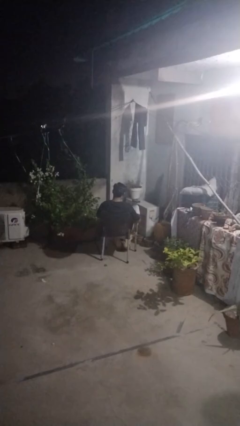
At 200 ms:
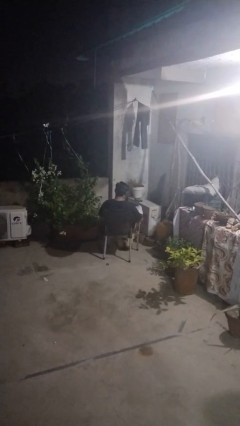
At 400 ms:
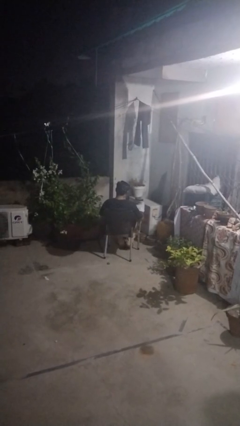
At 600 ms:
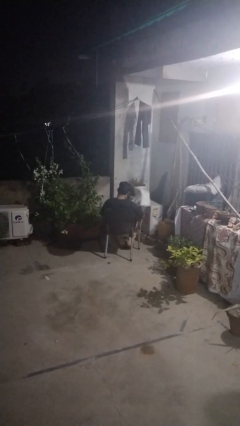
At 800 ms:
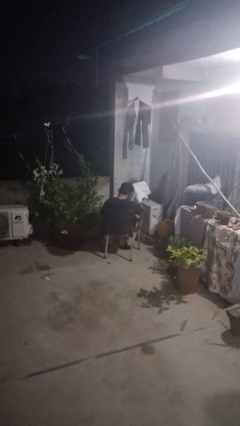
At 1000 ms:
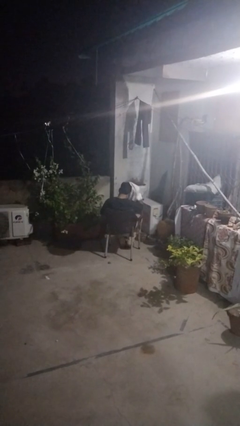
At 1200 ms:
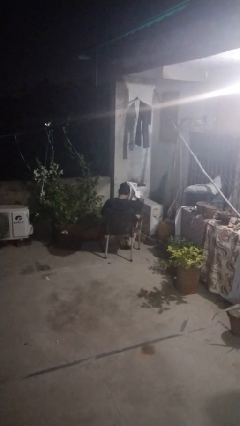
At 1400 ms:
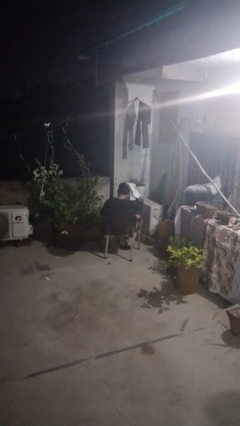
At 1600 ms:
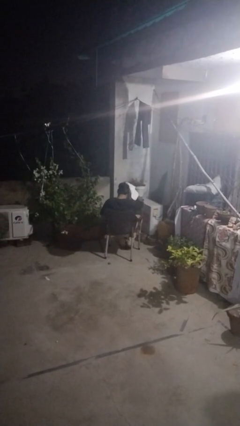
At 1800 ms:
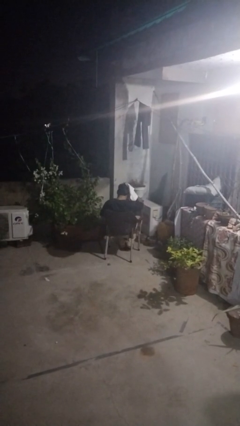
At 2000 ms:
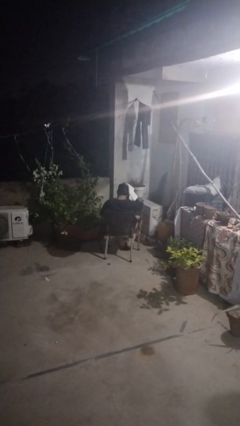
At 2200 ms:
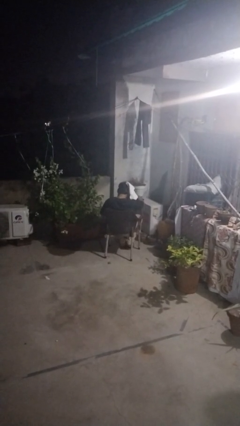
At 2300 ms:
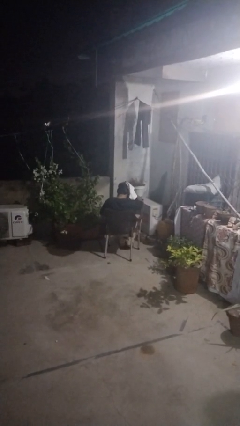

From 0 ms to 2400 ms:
person dries hair with towel

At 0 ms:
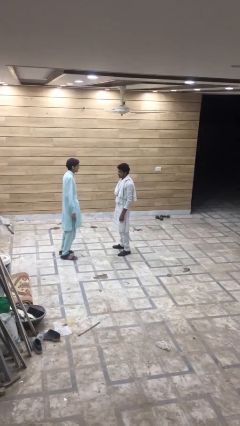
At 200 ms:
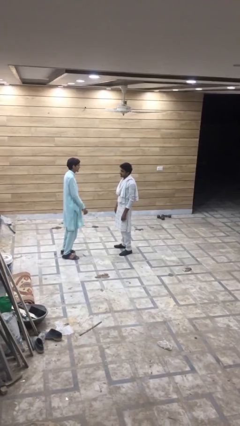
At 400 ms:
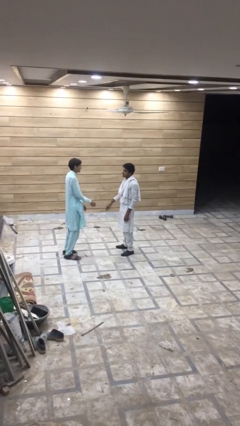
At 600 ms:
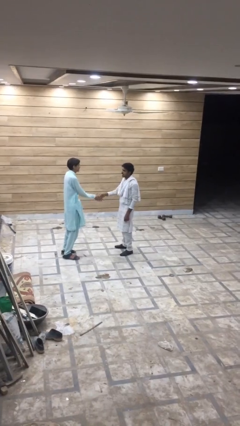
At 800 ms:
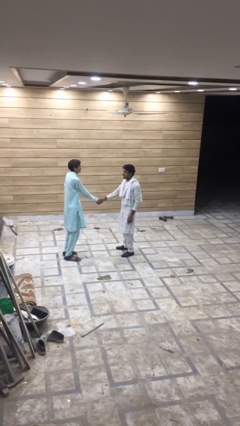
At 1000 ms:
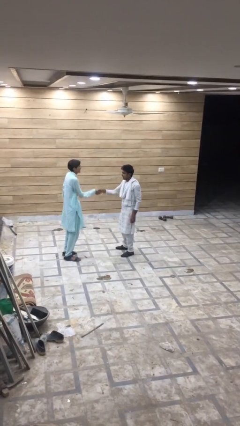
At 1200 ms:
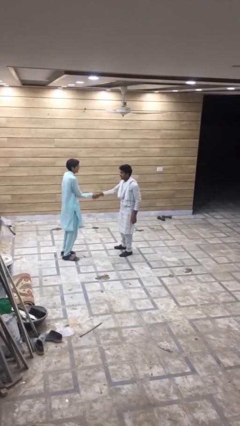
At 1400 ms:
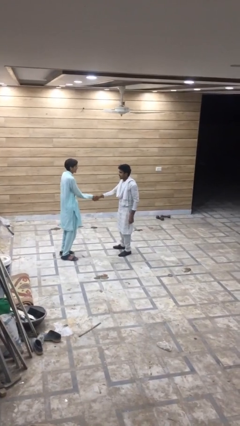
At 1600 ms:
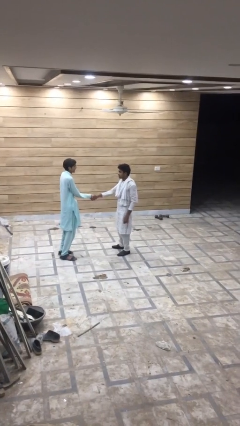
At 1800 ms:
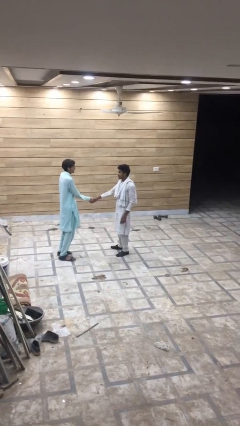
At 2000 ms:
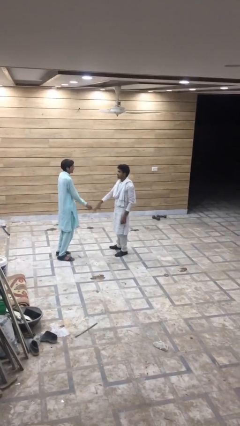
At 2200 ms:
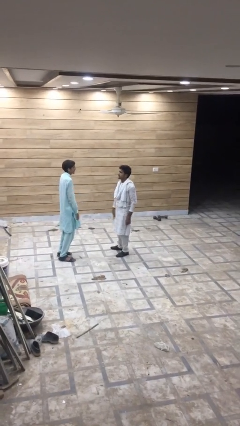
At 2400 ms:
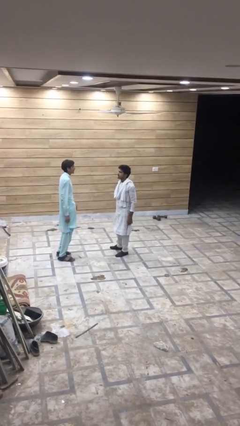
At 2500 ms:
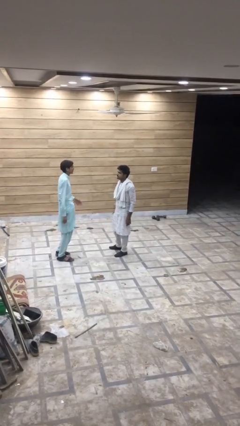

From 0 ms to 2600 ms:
person shakes hand

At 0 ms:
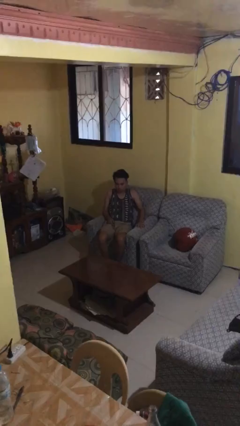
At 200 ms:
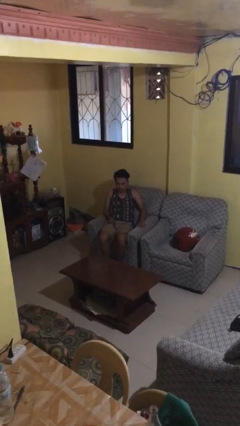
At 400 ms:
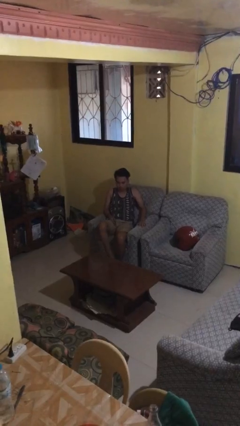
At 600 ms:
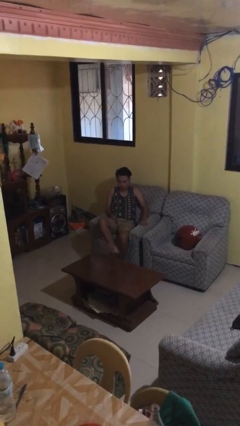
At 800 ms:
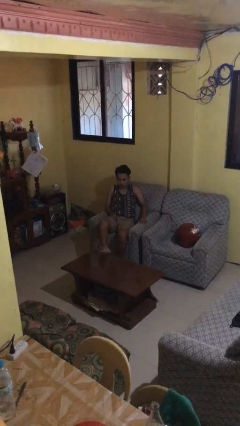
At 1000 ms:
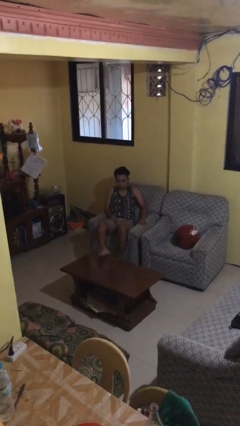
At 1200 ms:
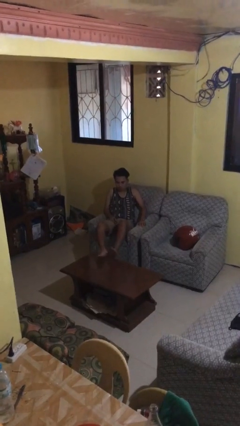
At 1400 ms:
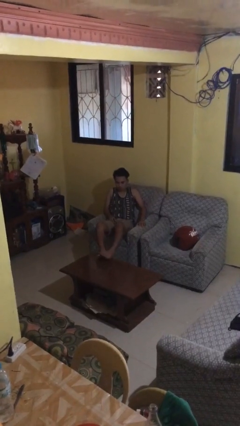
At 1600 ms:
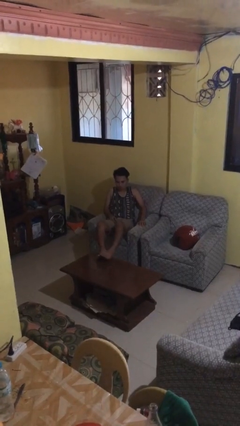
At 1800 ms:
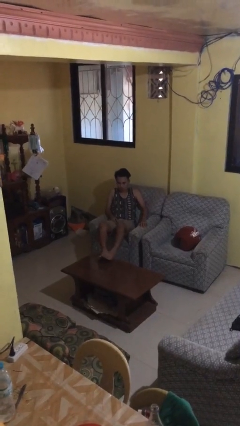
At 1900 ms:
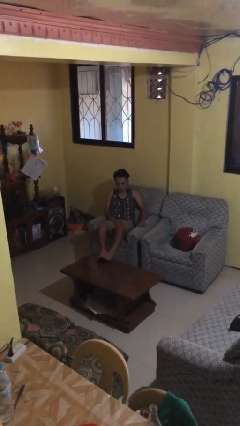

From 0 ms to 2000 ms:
person puts feet up

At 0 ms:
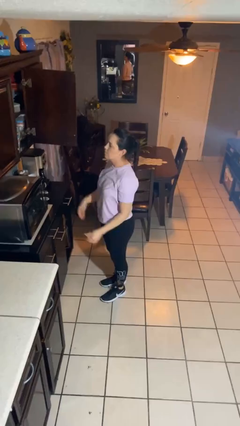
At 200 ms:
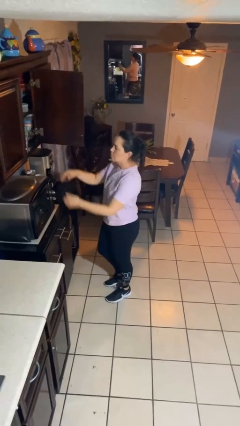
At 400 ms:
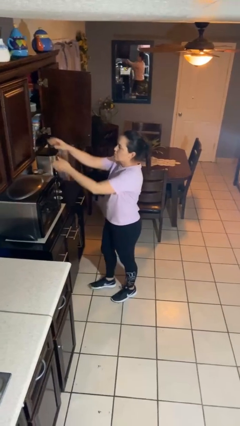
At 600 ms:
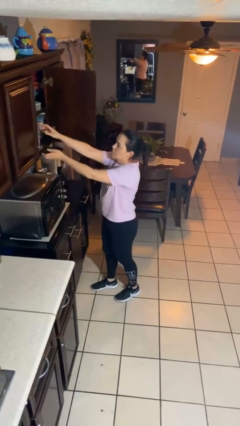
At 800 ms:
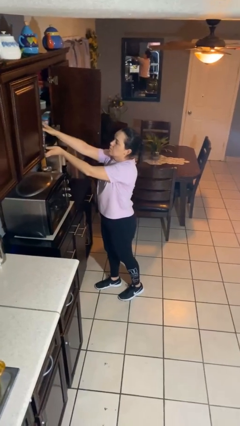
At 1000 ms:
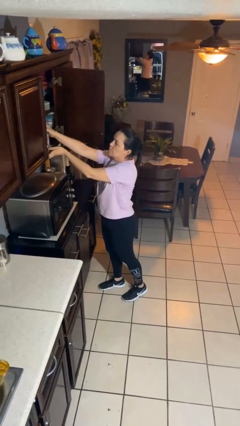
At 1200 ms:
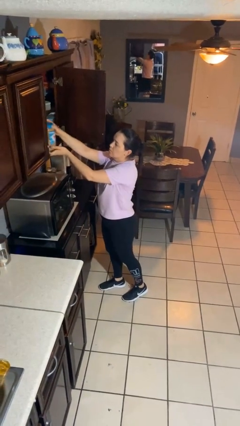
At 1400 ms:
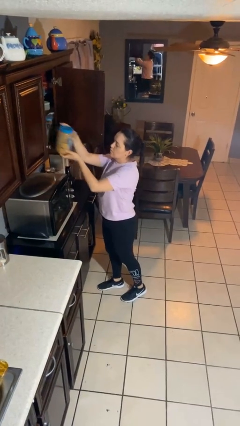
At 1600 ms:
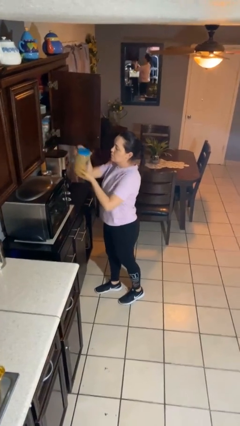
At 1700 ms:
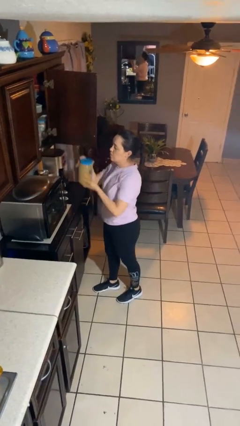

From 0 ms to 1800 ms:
person picks up object from cabinet

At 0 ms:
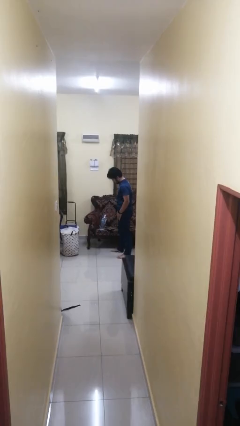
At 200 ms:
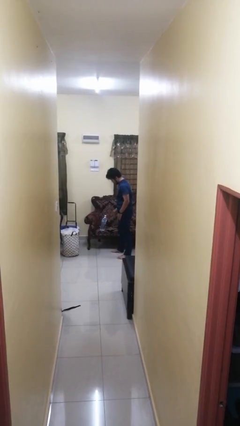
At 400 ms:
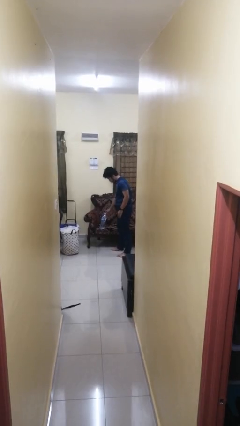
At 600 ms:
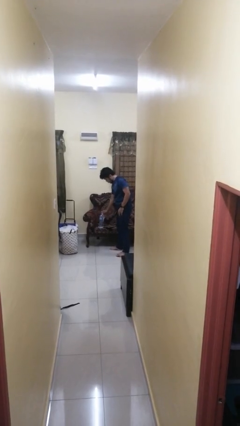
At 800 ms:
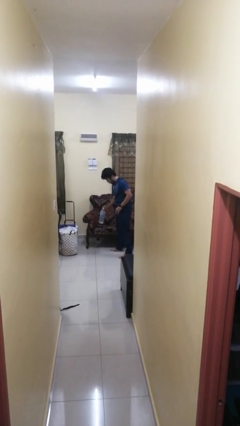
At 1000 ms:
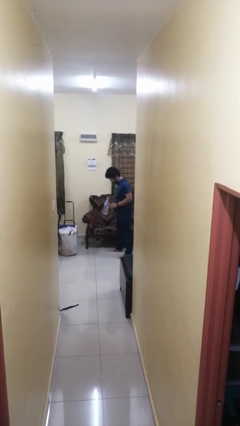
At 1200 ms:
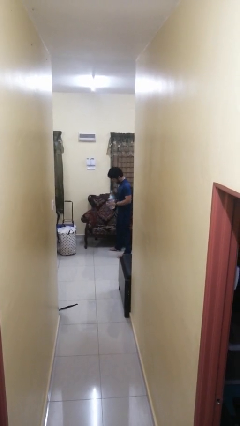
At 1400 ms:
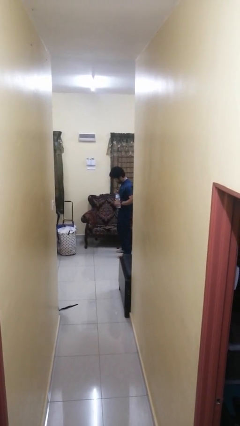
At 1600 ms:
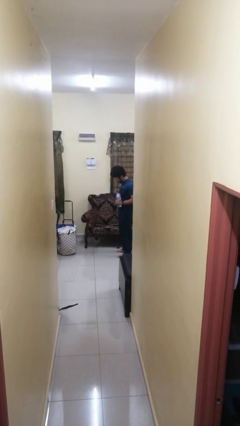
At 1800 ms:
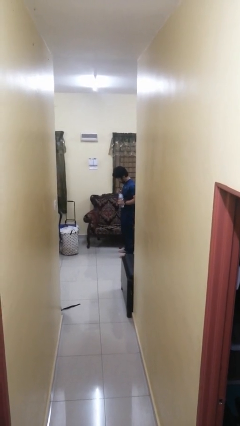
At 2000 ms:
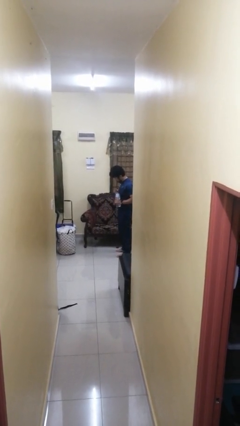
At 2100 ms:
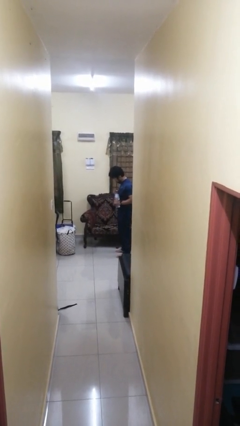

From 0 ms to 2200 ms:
person picks up object from couch

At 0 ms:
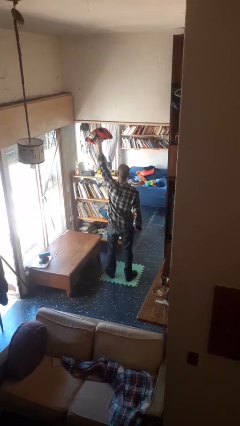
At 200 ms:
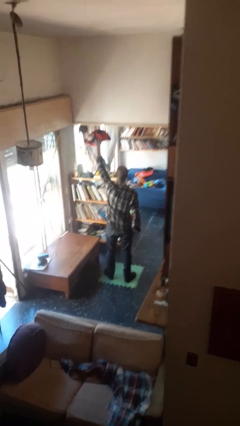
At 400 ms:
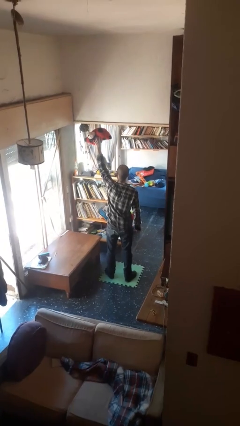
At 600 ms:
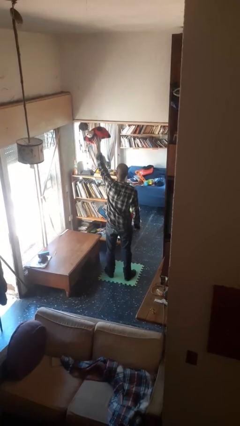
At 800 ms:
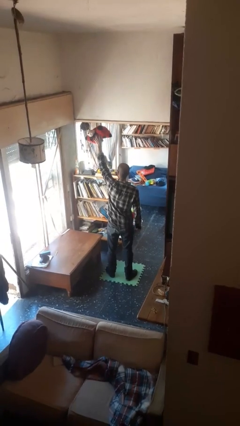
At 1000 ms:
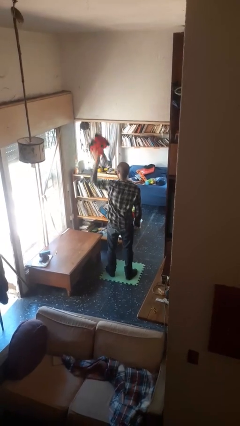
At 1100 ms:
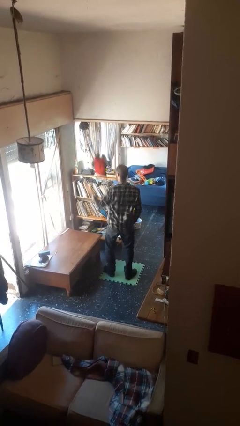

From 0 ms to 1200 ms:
person drops object

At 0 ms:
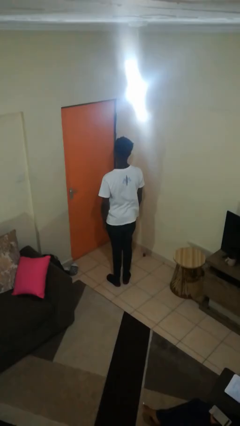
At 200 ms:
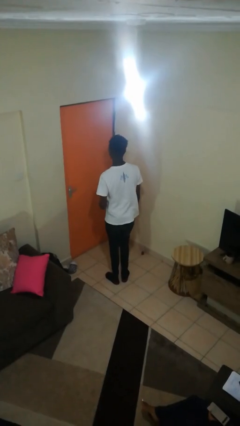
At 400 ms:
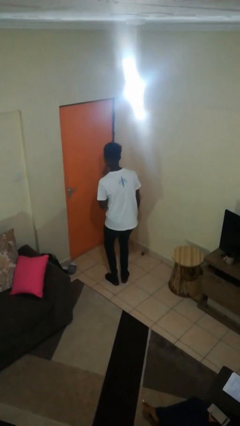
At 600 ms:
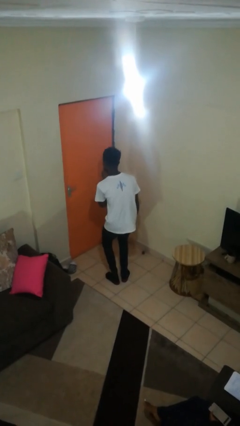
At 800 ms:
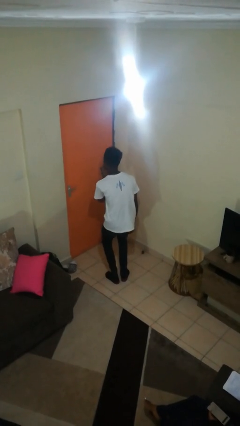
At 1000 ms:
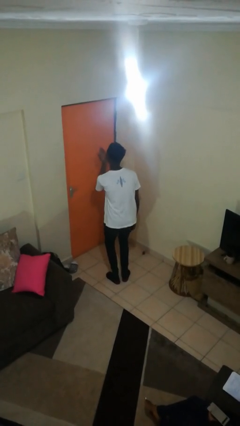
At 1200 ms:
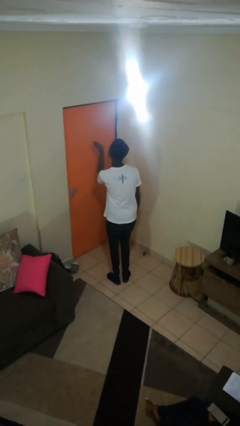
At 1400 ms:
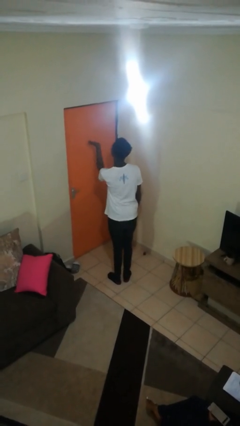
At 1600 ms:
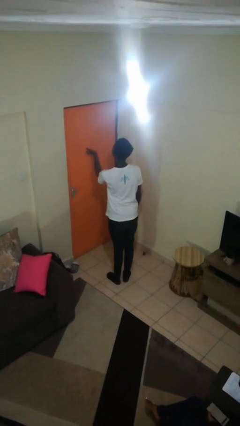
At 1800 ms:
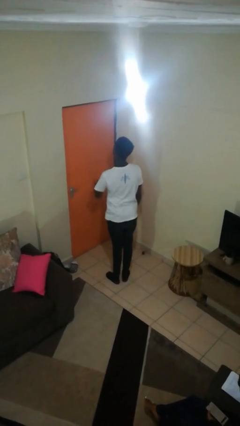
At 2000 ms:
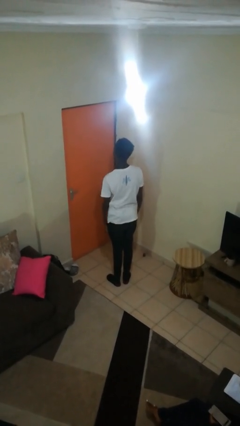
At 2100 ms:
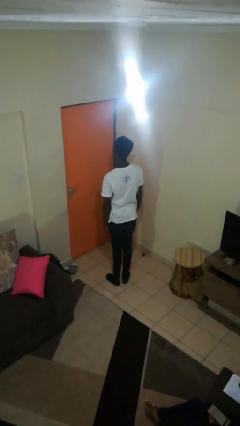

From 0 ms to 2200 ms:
person gestures blow kiss

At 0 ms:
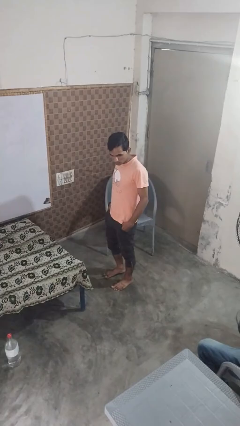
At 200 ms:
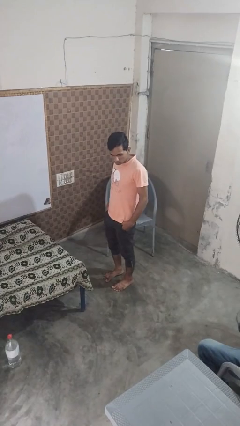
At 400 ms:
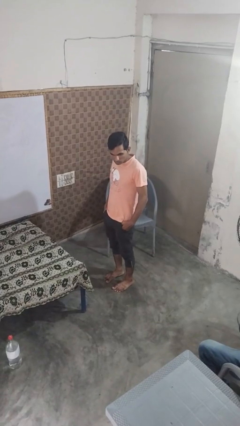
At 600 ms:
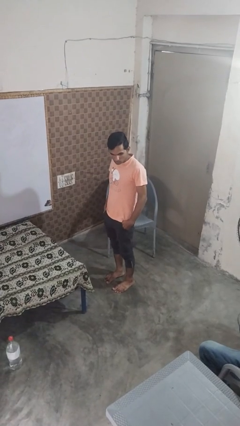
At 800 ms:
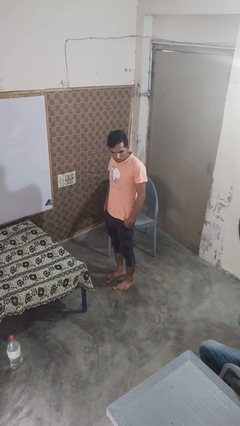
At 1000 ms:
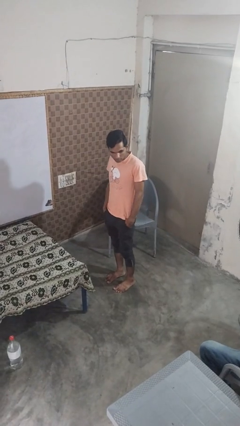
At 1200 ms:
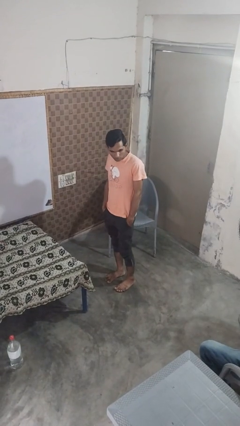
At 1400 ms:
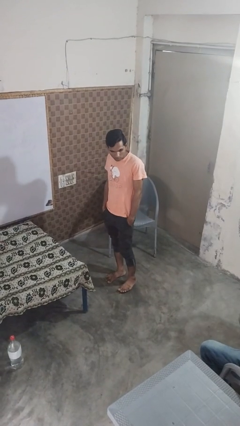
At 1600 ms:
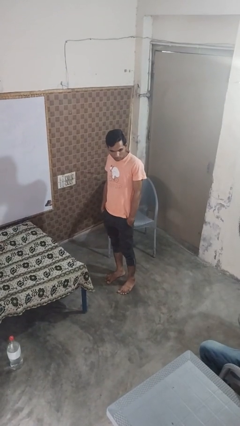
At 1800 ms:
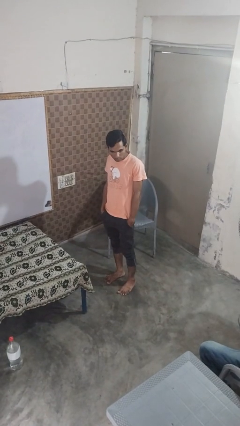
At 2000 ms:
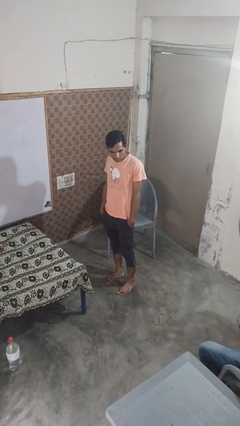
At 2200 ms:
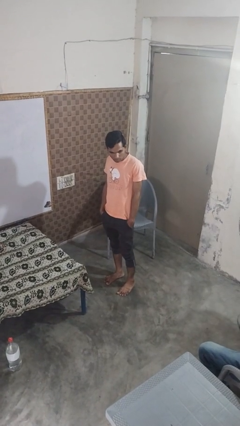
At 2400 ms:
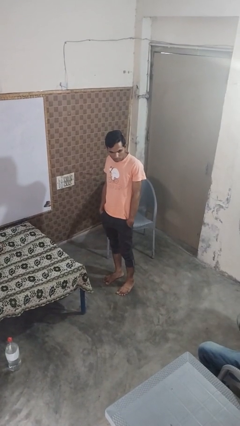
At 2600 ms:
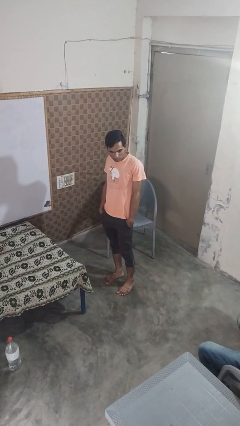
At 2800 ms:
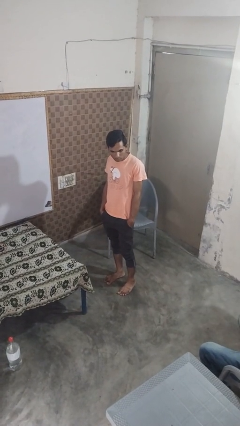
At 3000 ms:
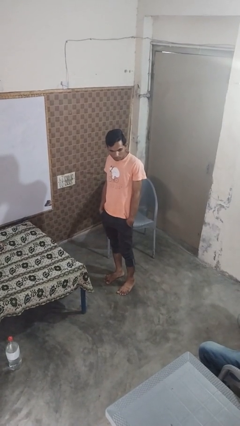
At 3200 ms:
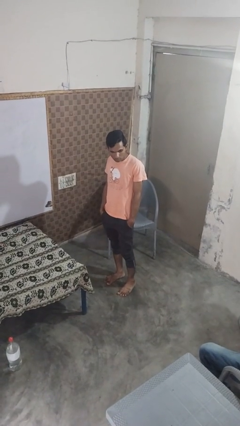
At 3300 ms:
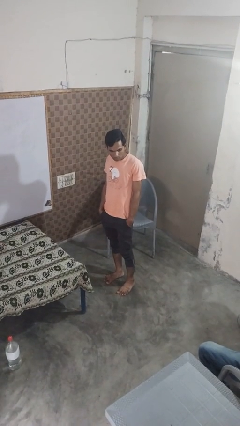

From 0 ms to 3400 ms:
person puts hands in back pockets
